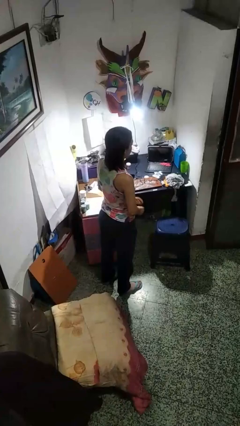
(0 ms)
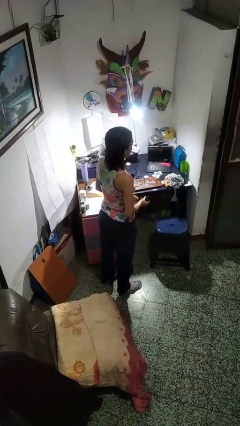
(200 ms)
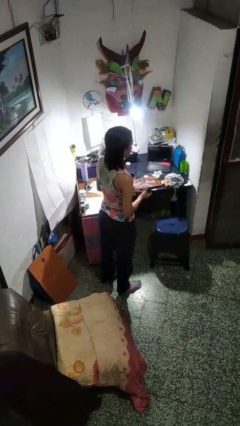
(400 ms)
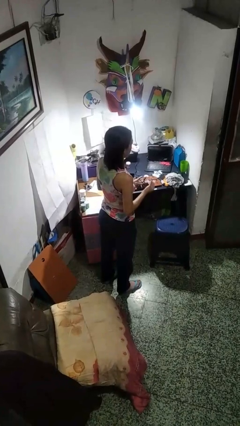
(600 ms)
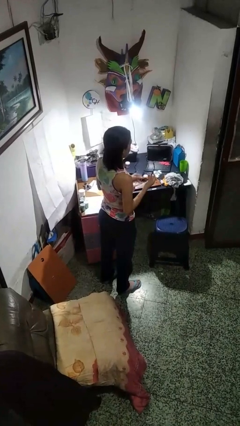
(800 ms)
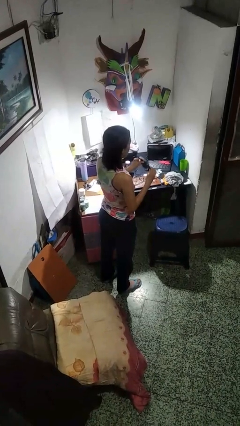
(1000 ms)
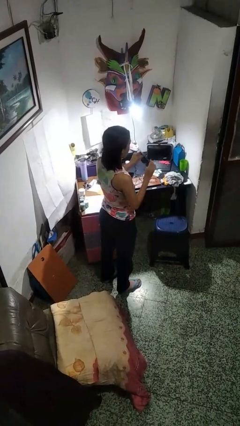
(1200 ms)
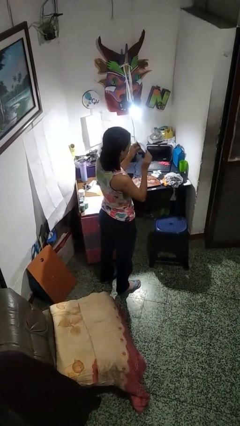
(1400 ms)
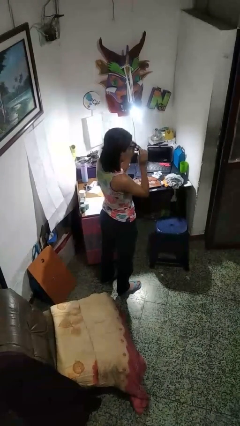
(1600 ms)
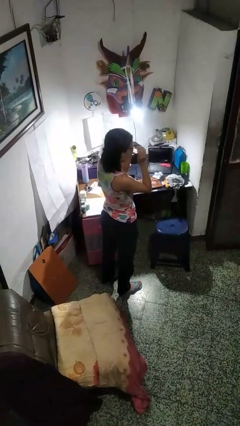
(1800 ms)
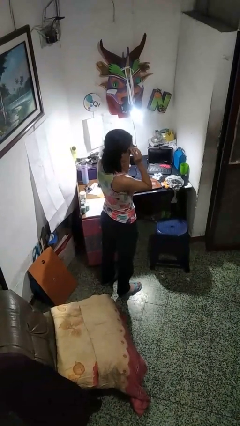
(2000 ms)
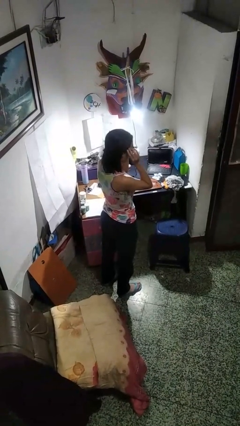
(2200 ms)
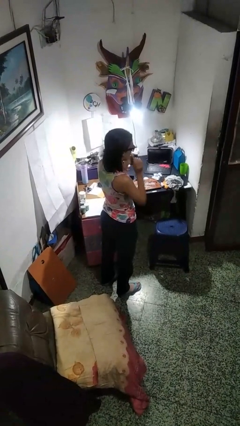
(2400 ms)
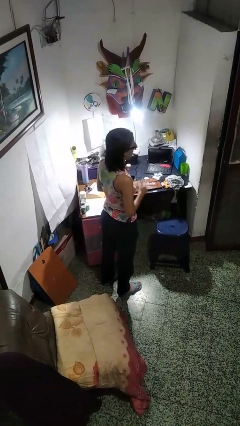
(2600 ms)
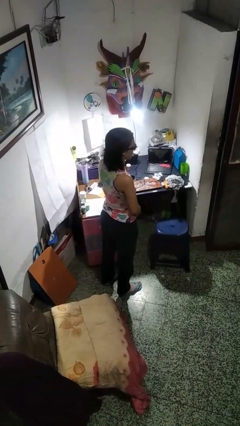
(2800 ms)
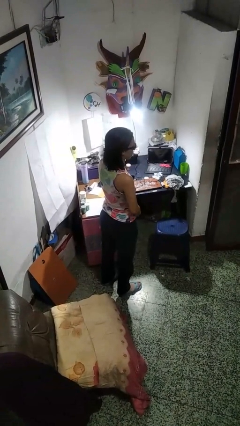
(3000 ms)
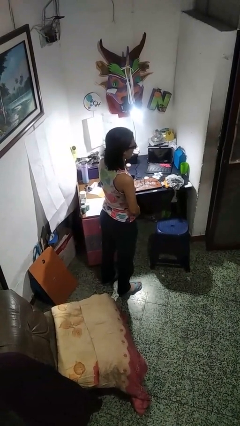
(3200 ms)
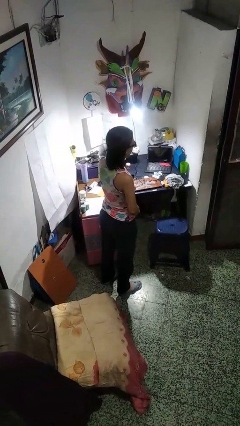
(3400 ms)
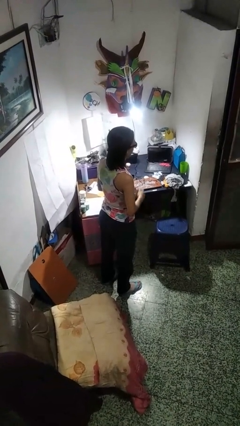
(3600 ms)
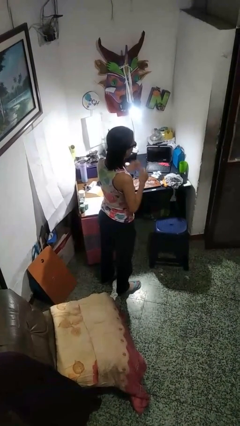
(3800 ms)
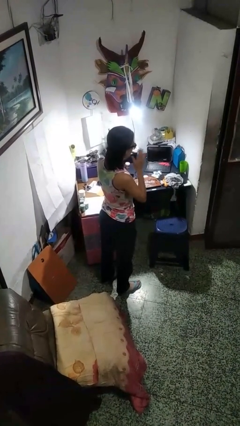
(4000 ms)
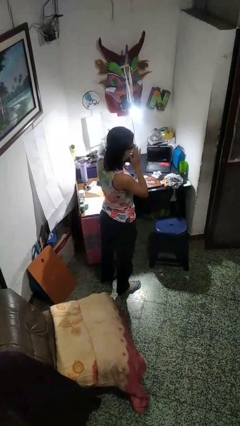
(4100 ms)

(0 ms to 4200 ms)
person puts on sunglasses

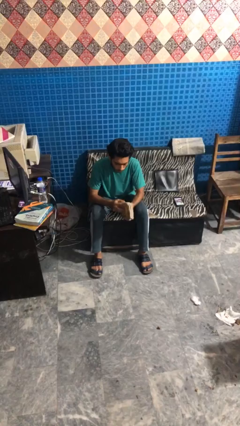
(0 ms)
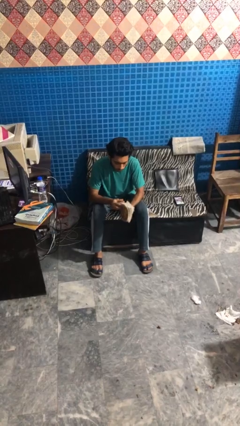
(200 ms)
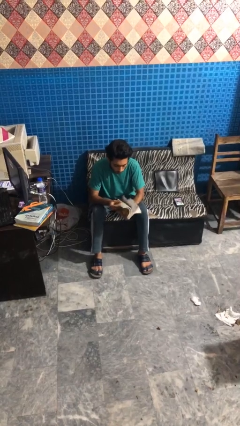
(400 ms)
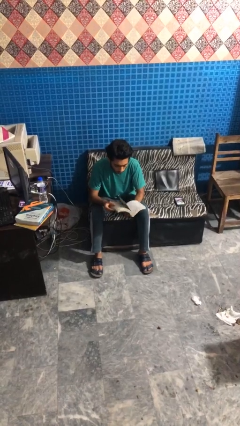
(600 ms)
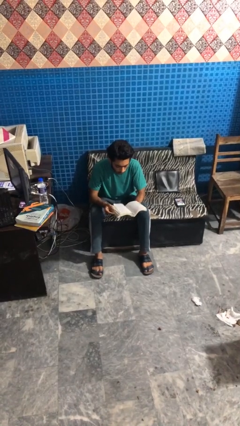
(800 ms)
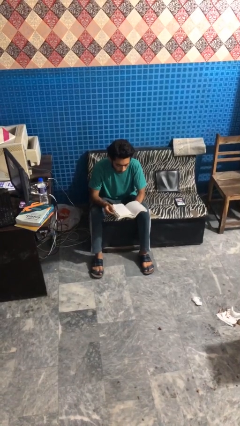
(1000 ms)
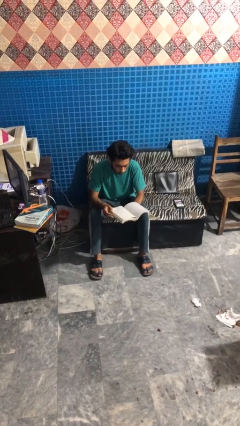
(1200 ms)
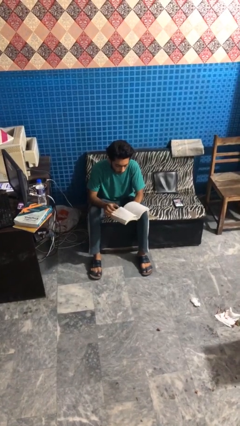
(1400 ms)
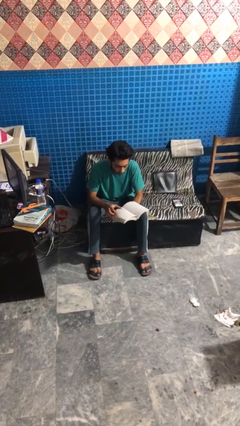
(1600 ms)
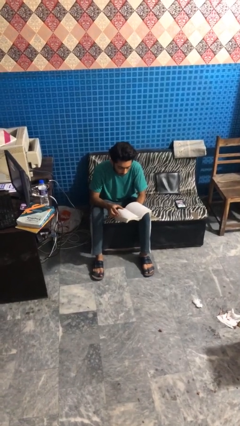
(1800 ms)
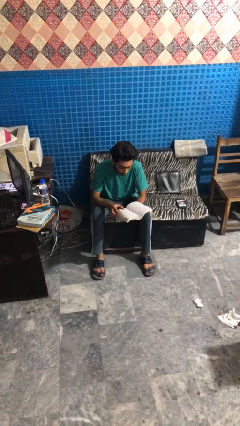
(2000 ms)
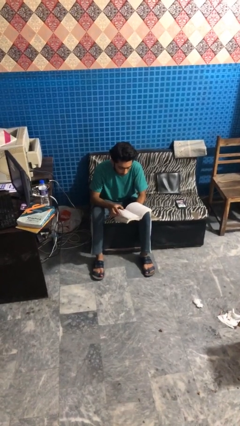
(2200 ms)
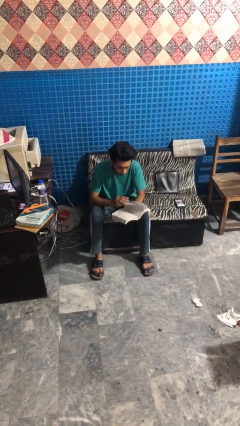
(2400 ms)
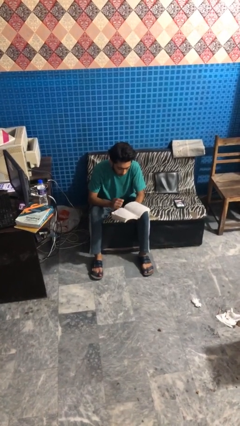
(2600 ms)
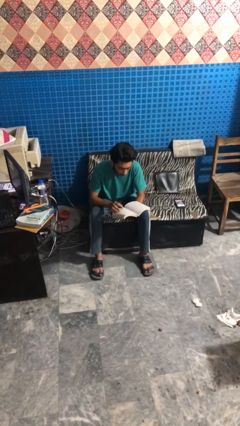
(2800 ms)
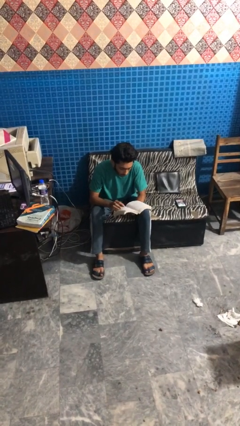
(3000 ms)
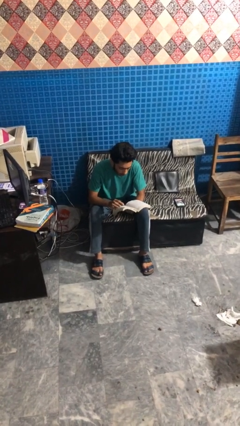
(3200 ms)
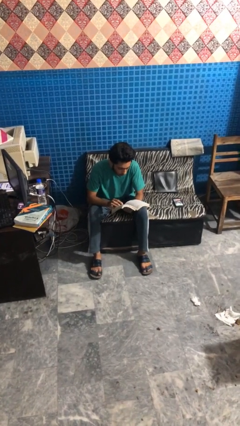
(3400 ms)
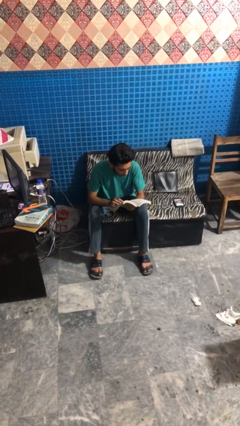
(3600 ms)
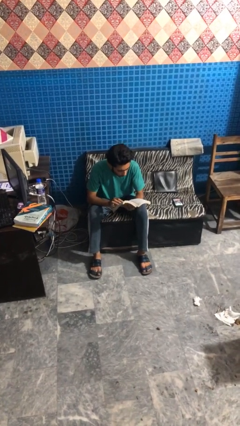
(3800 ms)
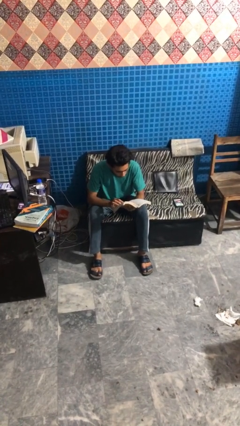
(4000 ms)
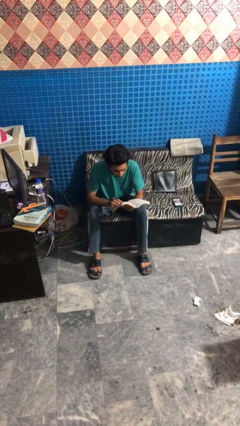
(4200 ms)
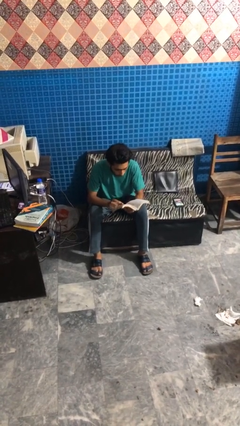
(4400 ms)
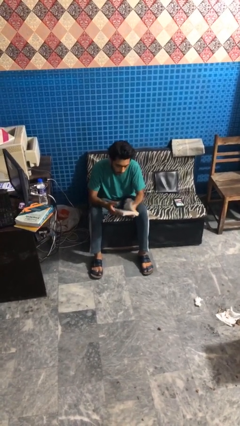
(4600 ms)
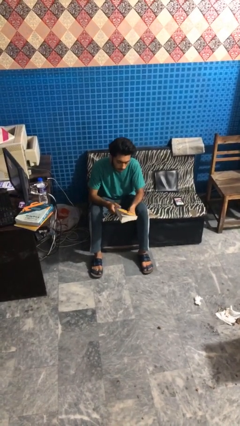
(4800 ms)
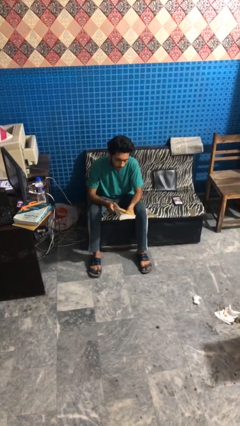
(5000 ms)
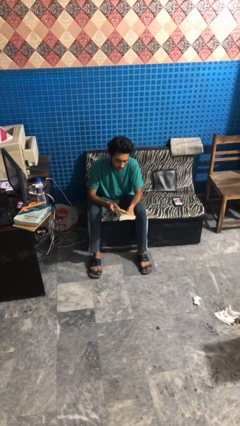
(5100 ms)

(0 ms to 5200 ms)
person reads magazine

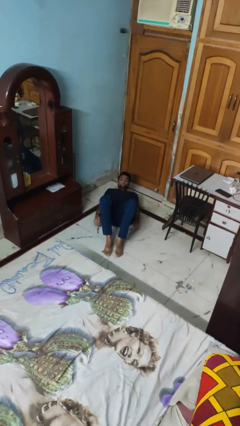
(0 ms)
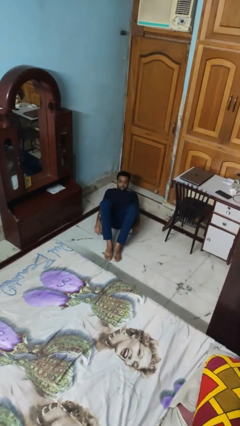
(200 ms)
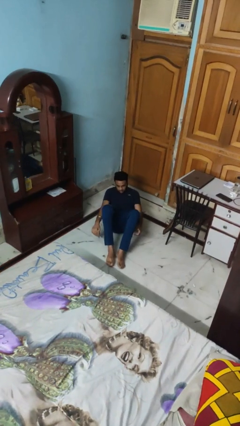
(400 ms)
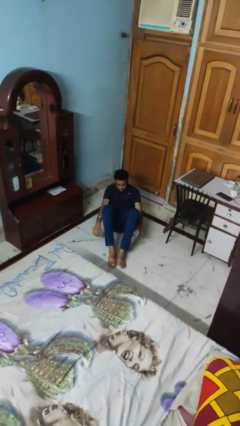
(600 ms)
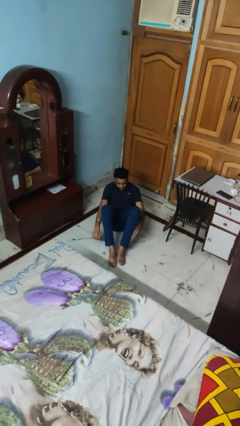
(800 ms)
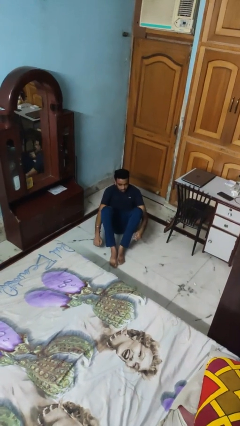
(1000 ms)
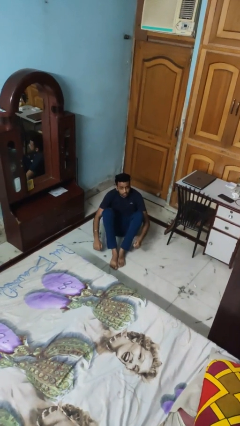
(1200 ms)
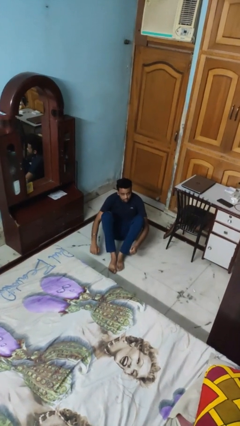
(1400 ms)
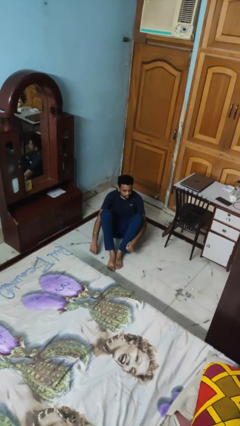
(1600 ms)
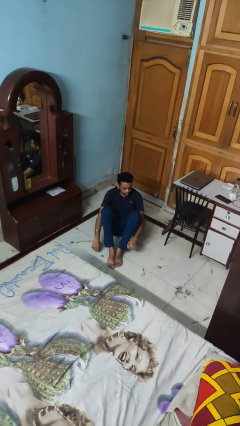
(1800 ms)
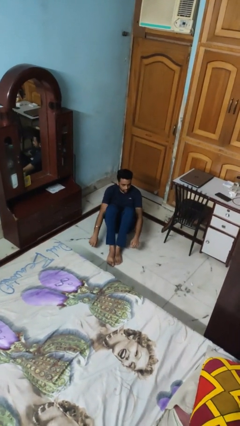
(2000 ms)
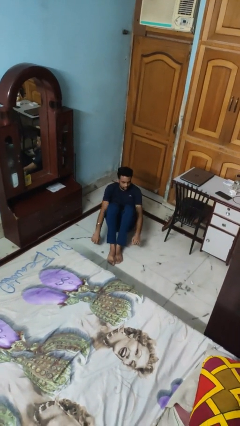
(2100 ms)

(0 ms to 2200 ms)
person exercises with situp

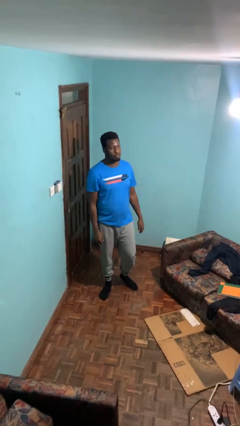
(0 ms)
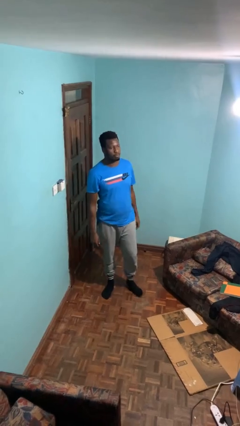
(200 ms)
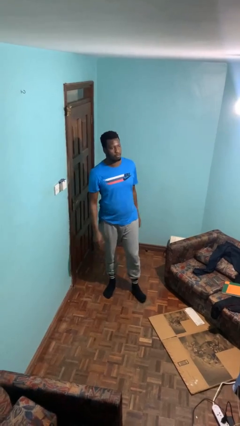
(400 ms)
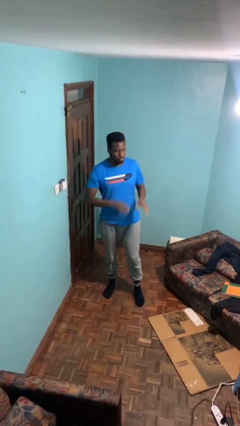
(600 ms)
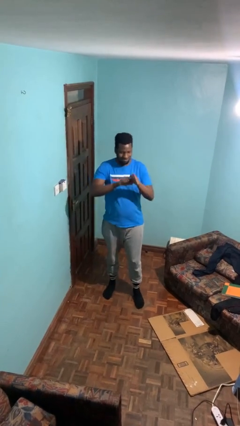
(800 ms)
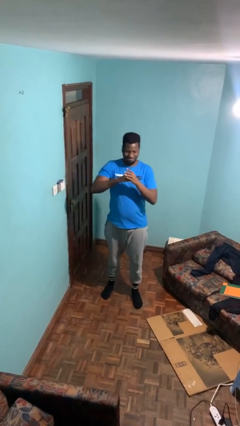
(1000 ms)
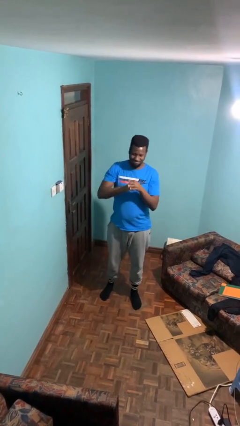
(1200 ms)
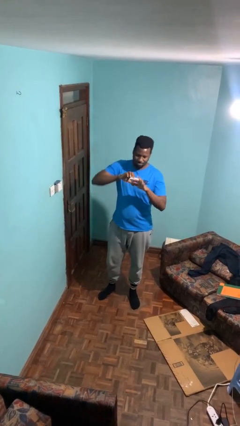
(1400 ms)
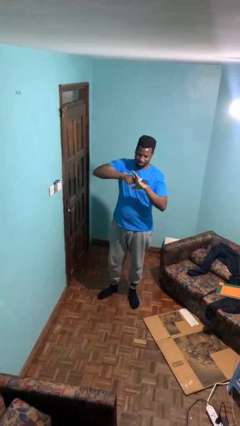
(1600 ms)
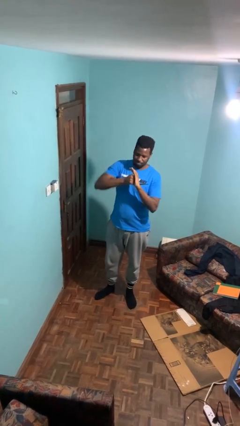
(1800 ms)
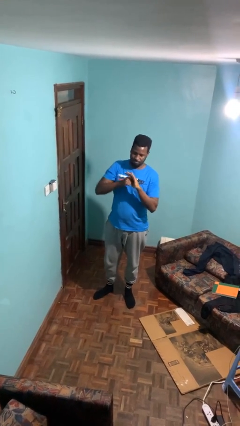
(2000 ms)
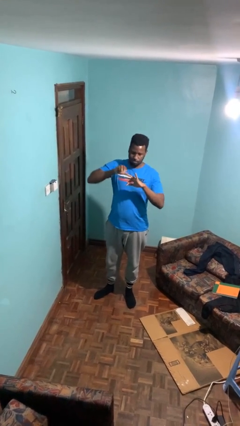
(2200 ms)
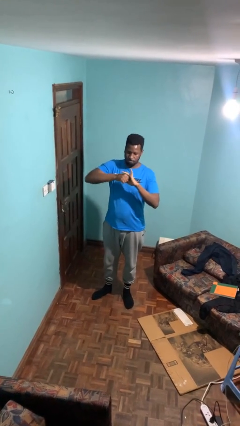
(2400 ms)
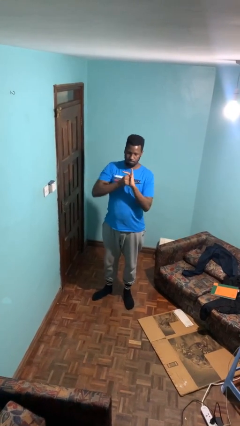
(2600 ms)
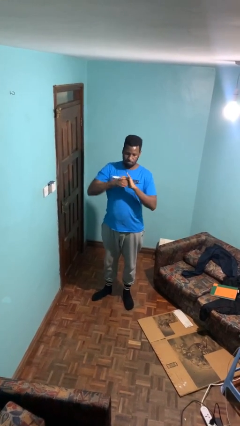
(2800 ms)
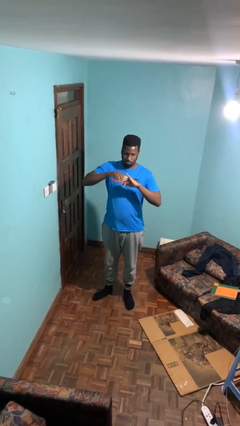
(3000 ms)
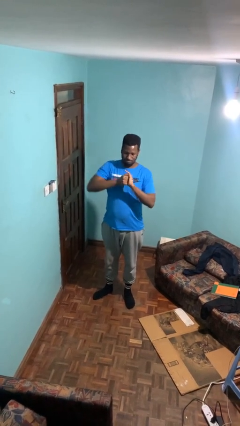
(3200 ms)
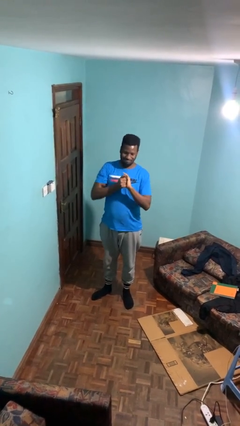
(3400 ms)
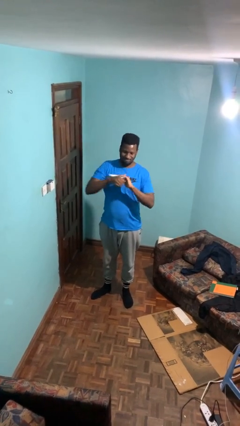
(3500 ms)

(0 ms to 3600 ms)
person cracks knuckles

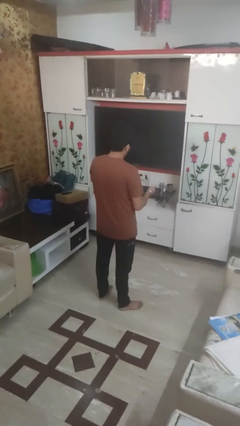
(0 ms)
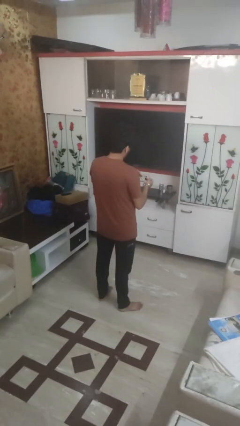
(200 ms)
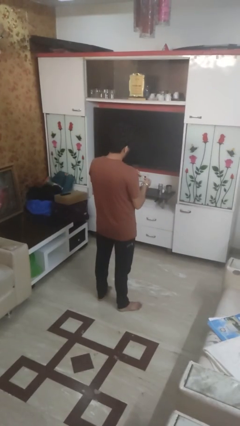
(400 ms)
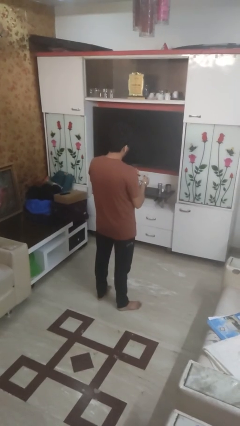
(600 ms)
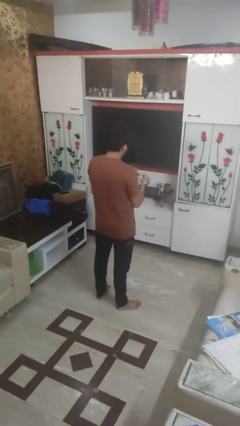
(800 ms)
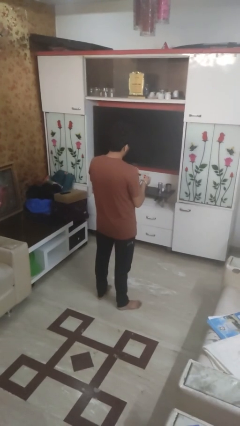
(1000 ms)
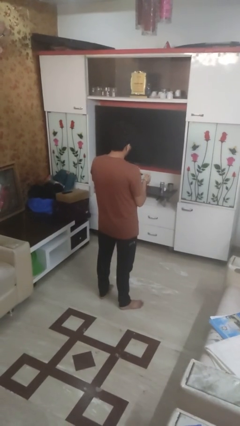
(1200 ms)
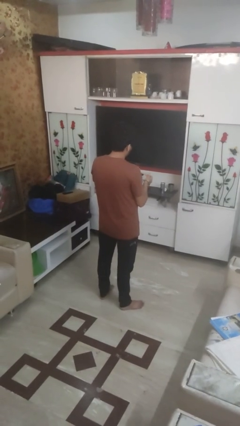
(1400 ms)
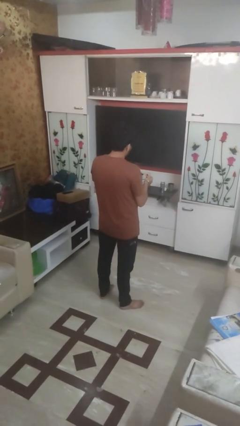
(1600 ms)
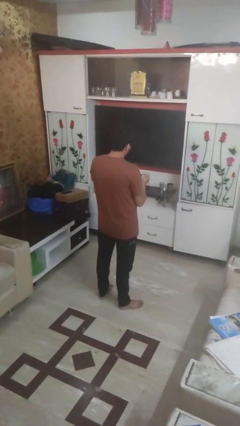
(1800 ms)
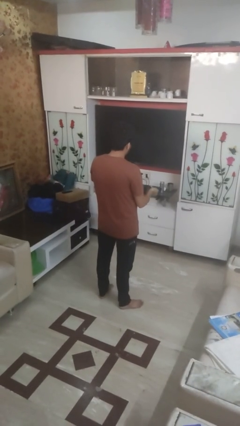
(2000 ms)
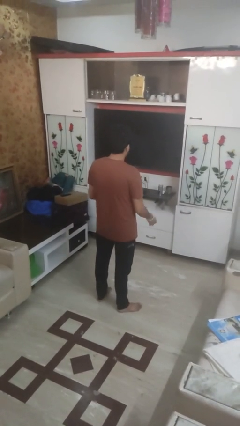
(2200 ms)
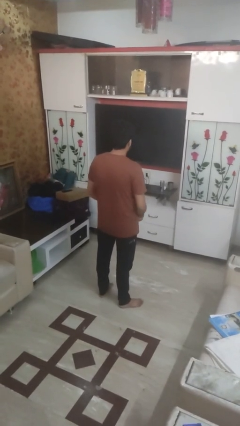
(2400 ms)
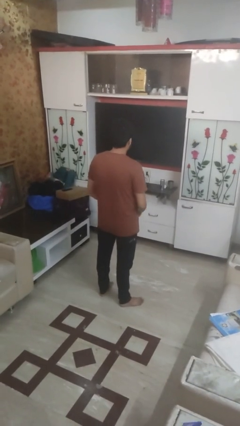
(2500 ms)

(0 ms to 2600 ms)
person files fingernails
